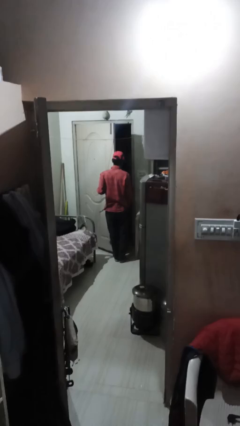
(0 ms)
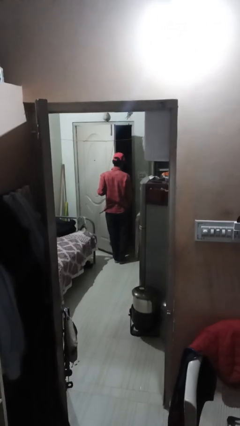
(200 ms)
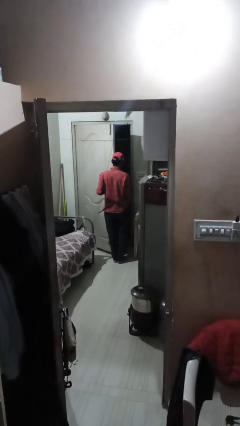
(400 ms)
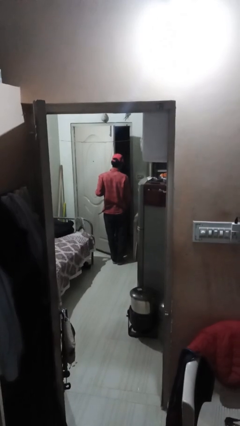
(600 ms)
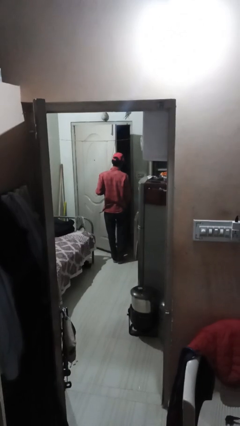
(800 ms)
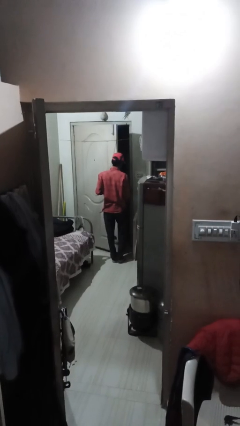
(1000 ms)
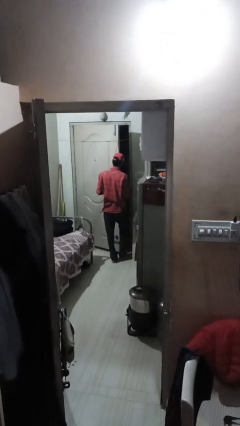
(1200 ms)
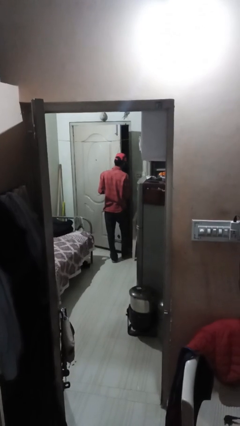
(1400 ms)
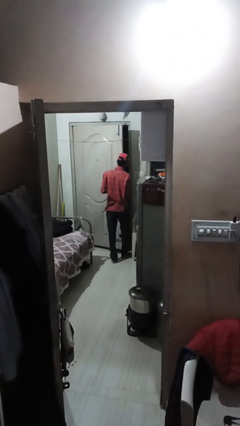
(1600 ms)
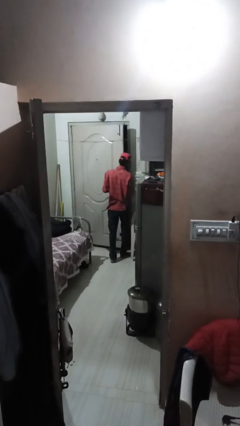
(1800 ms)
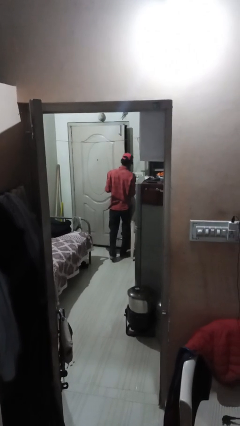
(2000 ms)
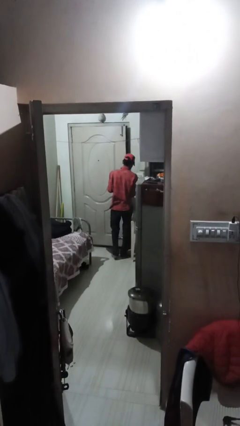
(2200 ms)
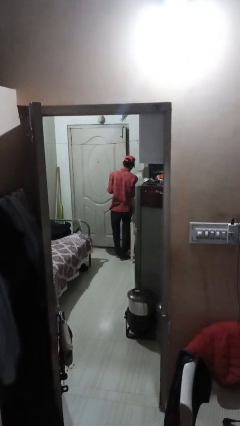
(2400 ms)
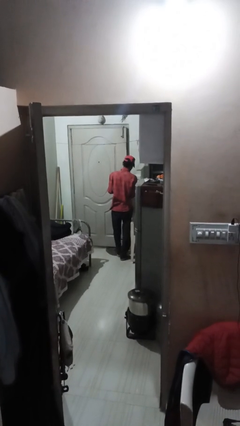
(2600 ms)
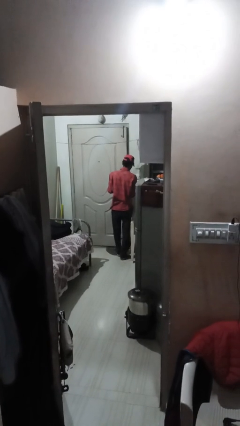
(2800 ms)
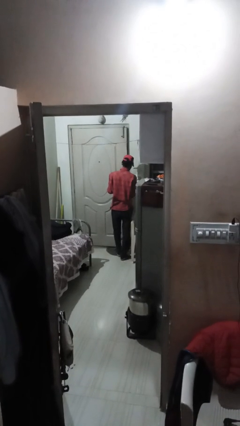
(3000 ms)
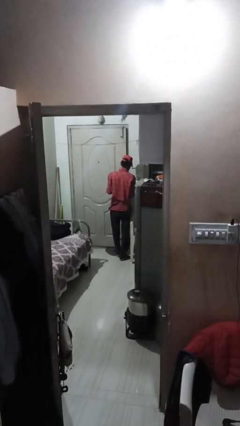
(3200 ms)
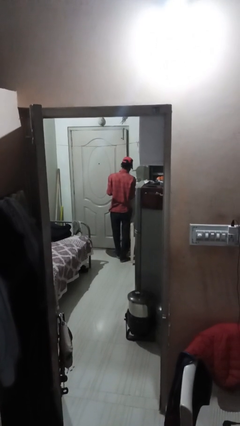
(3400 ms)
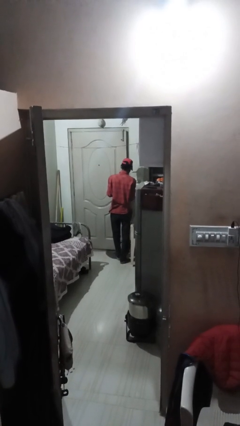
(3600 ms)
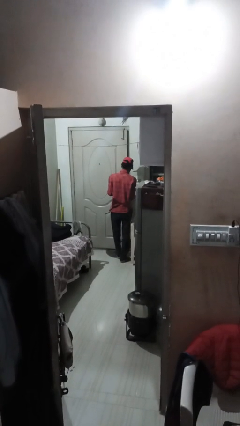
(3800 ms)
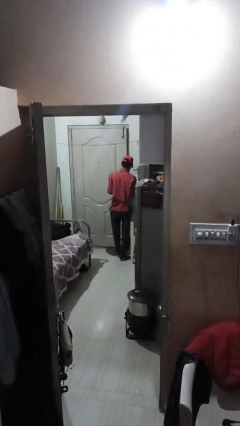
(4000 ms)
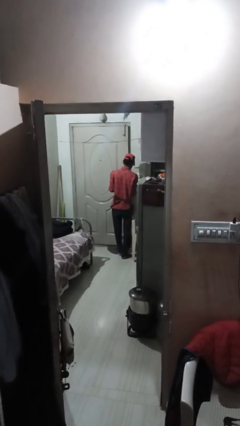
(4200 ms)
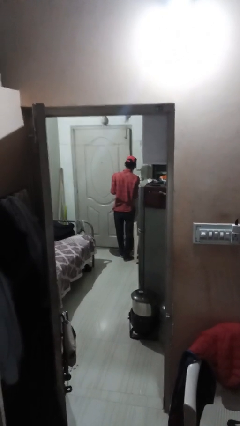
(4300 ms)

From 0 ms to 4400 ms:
person closes facility door

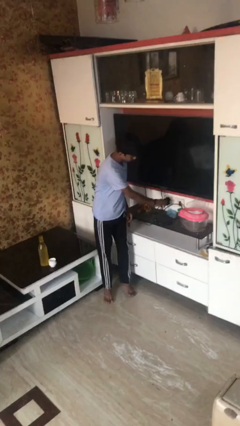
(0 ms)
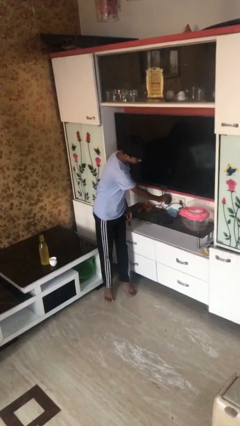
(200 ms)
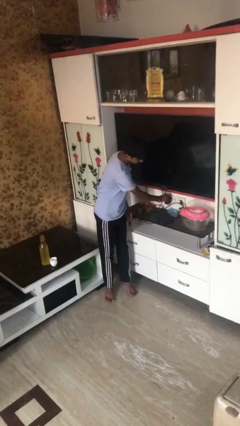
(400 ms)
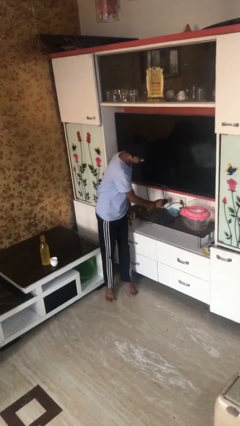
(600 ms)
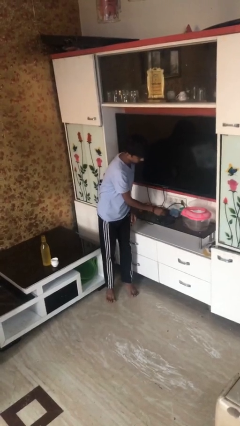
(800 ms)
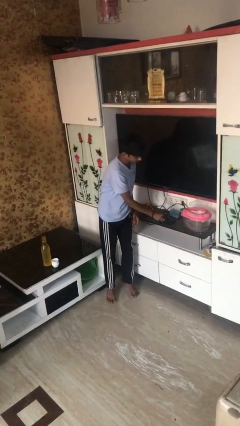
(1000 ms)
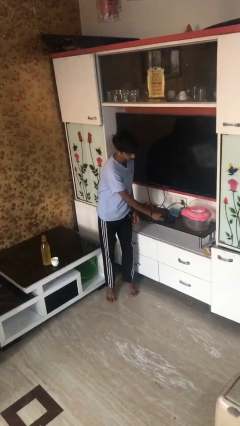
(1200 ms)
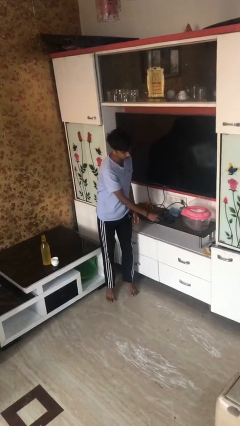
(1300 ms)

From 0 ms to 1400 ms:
person unplugs from electrical socket

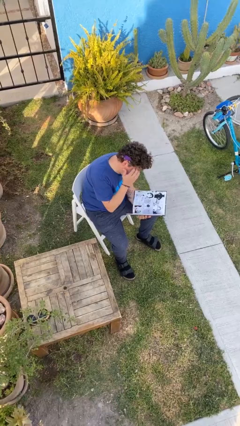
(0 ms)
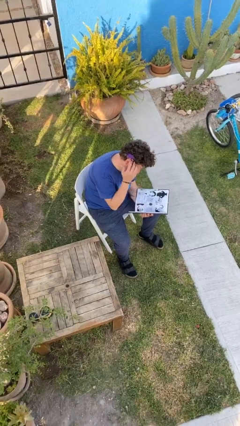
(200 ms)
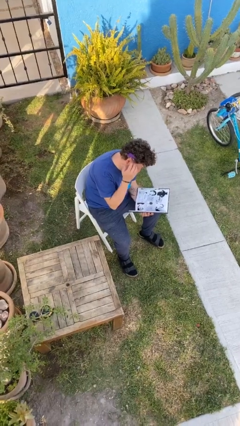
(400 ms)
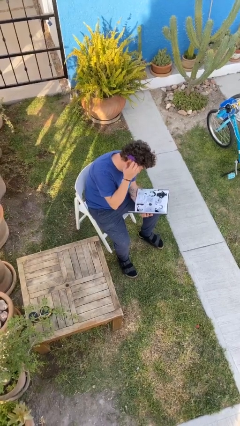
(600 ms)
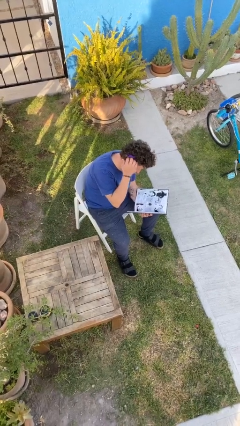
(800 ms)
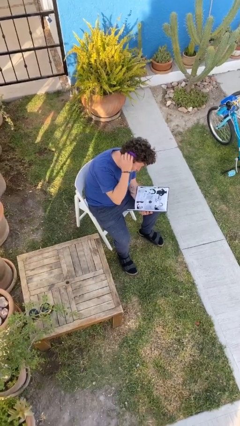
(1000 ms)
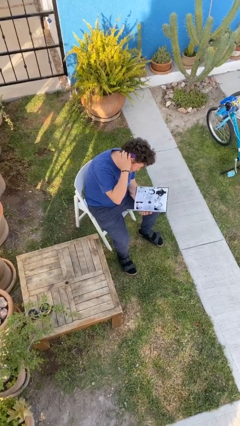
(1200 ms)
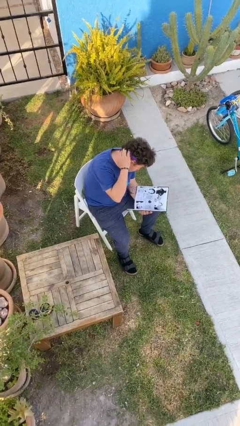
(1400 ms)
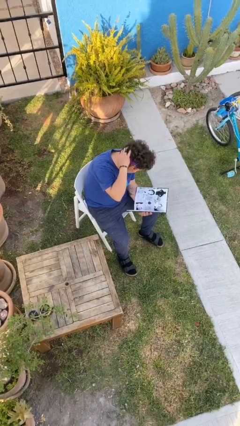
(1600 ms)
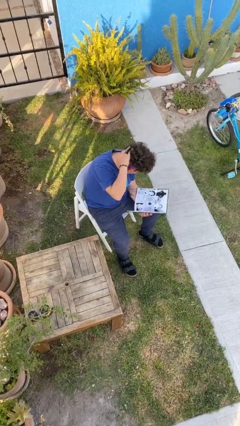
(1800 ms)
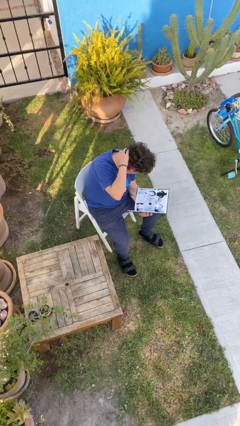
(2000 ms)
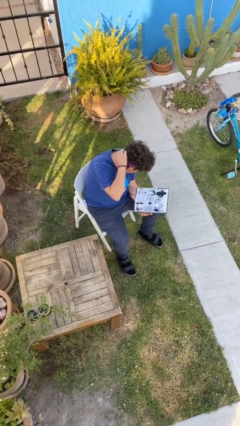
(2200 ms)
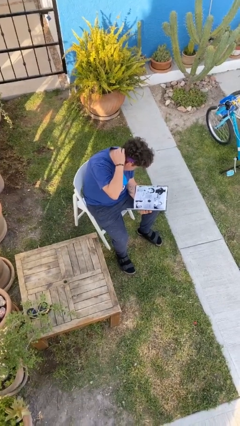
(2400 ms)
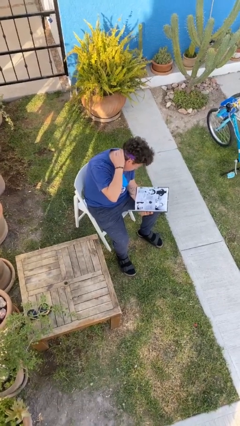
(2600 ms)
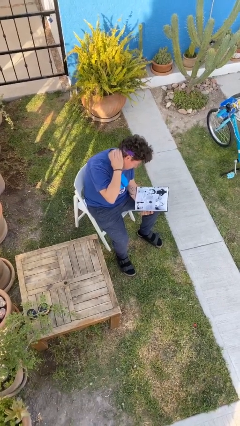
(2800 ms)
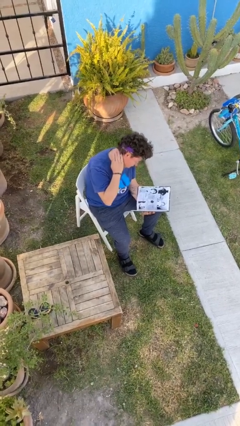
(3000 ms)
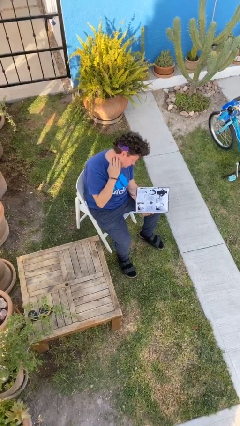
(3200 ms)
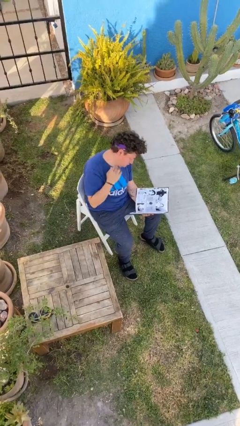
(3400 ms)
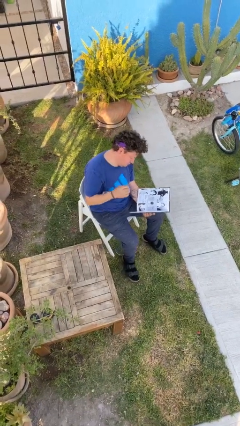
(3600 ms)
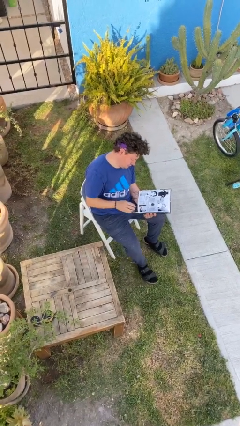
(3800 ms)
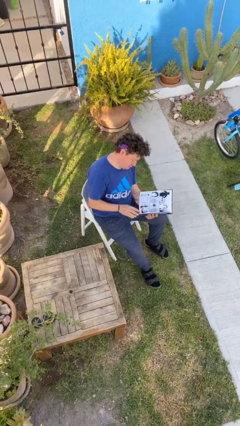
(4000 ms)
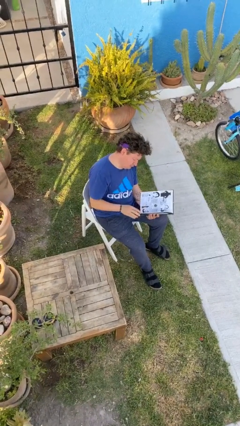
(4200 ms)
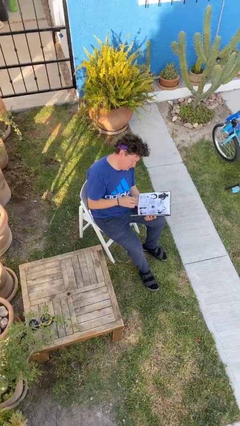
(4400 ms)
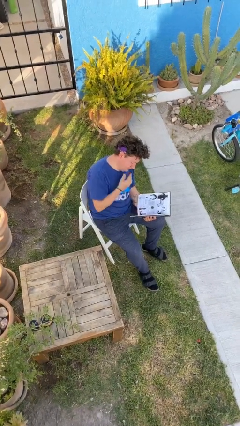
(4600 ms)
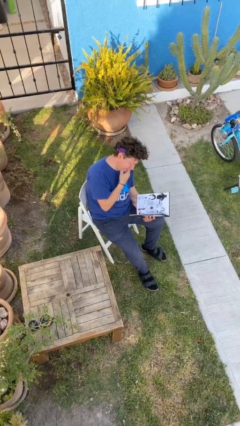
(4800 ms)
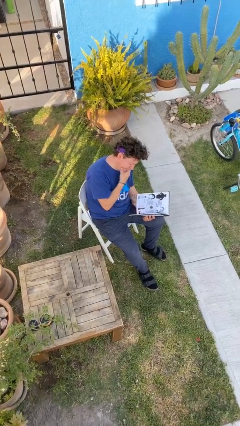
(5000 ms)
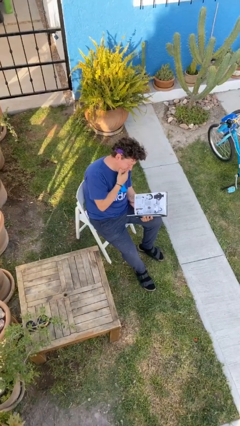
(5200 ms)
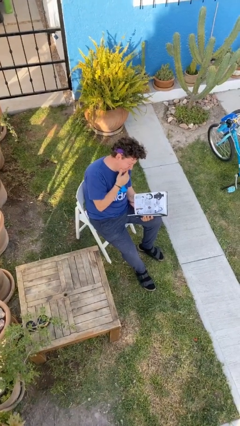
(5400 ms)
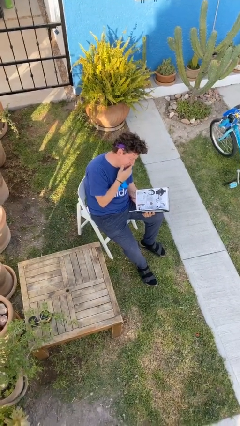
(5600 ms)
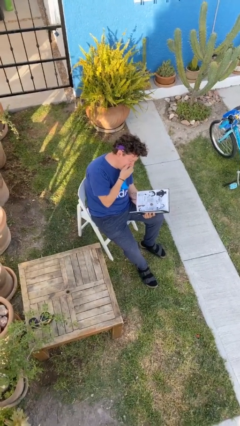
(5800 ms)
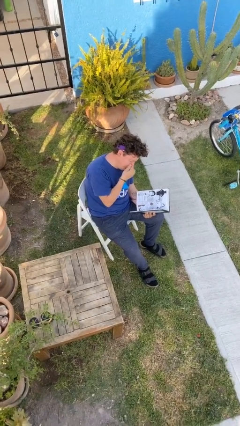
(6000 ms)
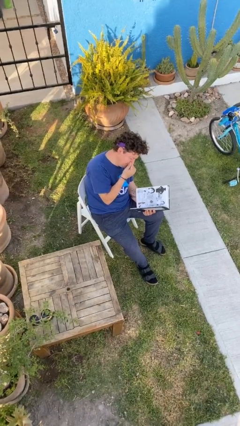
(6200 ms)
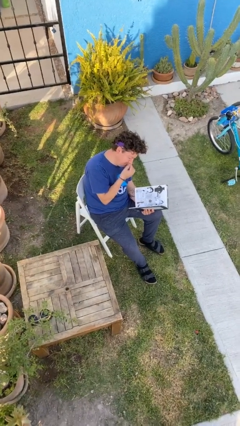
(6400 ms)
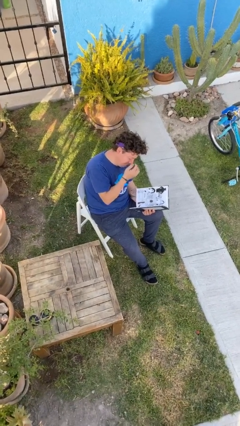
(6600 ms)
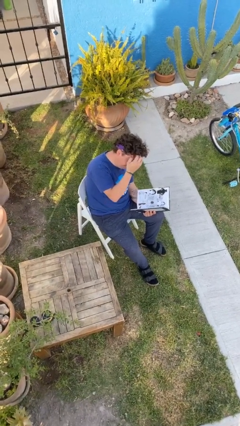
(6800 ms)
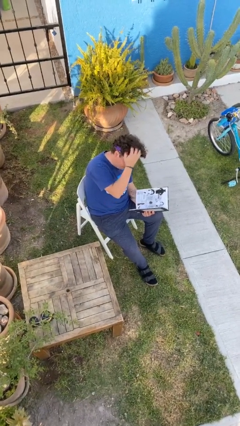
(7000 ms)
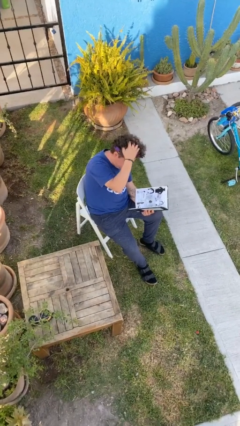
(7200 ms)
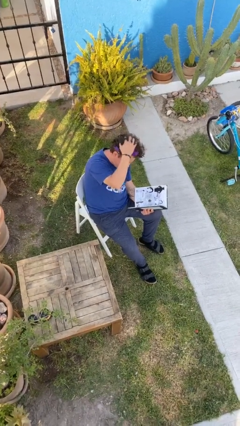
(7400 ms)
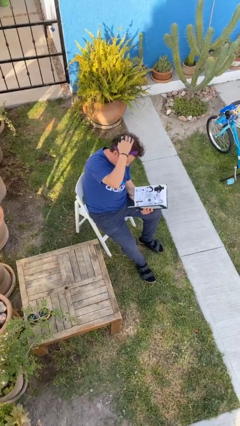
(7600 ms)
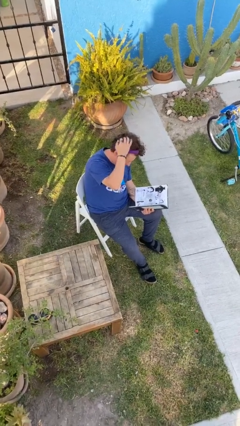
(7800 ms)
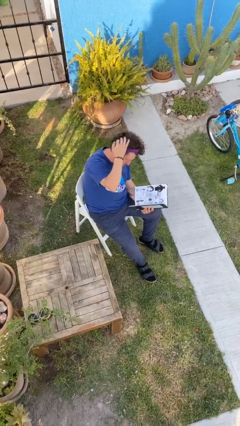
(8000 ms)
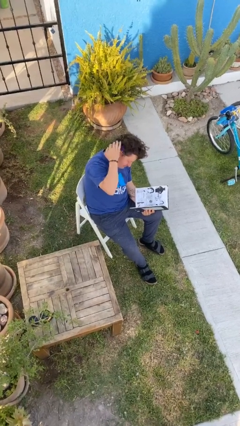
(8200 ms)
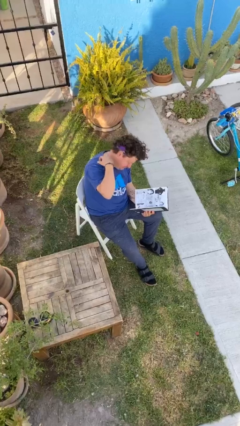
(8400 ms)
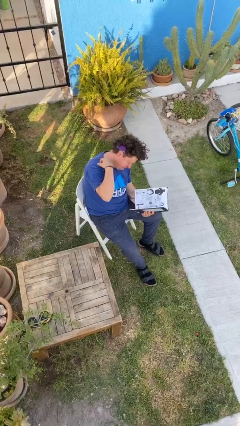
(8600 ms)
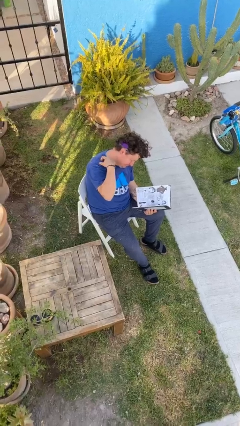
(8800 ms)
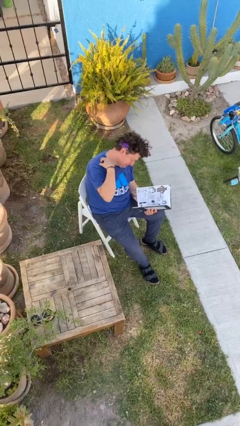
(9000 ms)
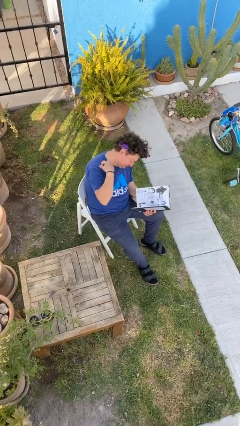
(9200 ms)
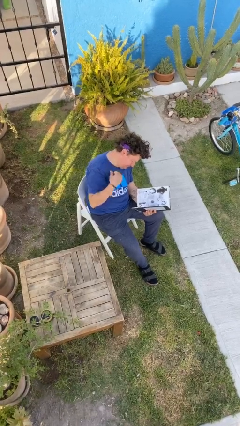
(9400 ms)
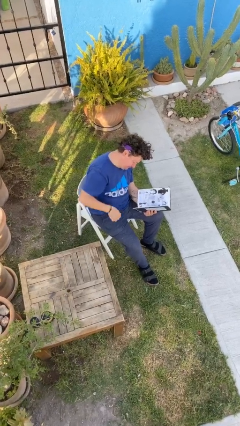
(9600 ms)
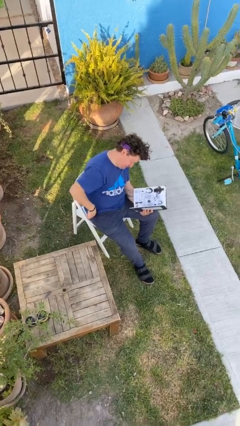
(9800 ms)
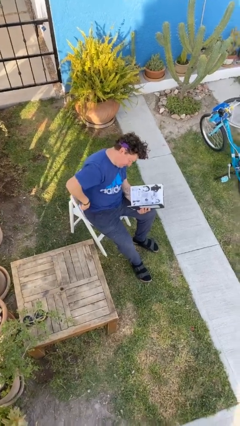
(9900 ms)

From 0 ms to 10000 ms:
person reads document

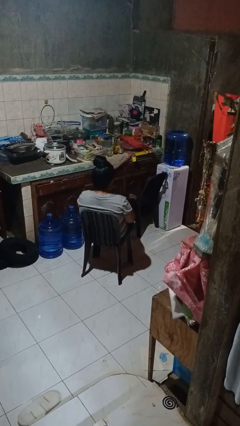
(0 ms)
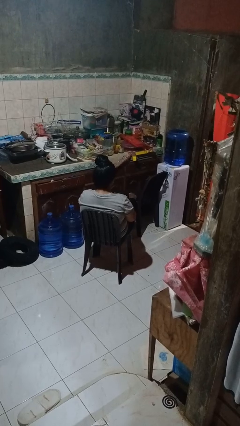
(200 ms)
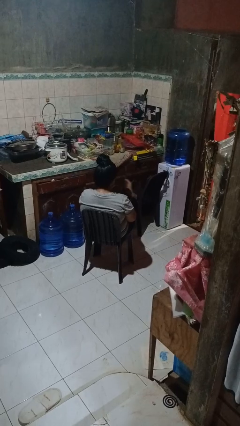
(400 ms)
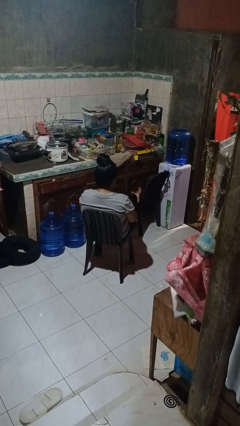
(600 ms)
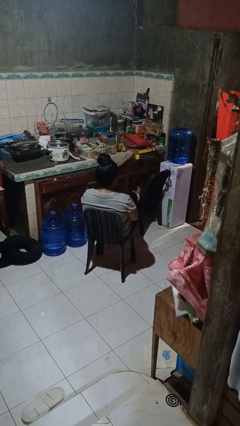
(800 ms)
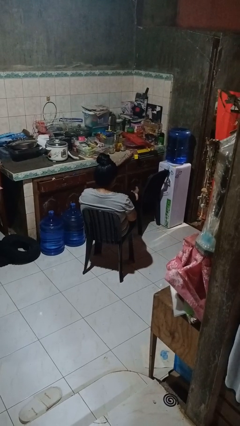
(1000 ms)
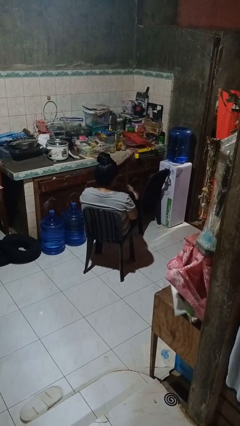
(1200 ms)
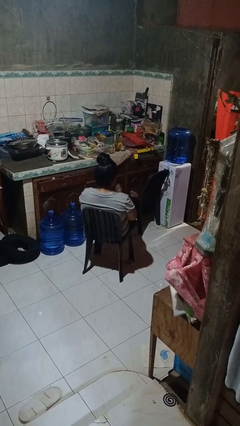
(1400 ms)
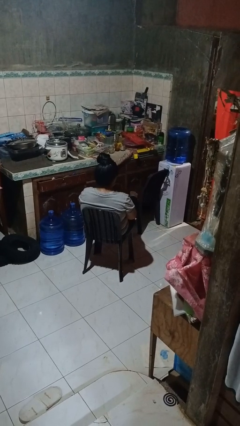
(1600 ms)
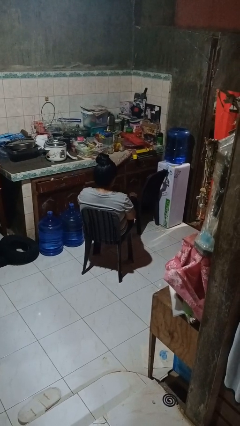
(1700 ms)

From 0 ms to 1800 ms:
person puts feet up

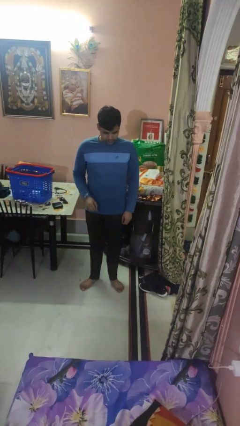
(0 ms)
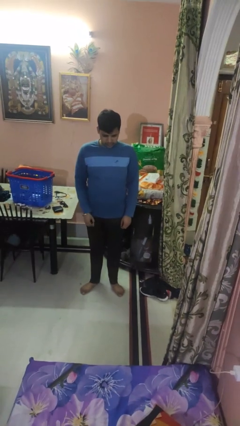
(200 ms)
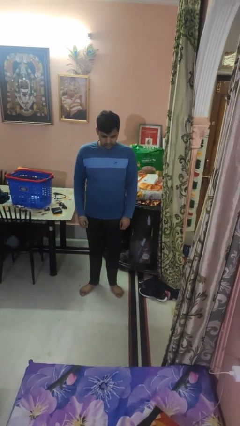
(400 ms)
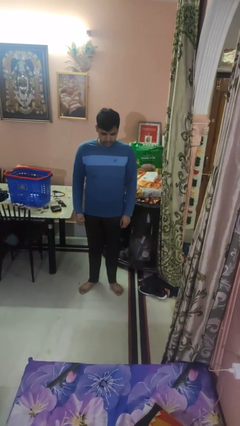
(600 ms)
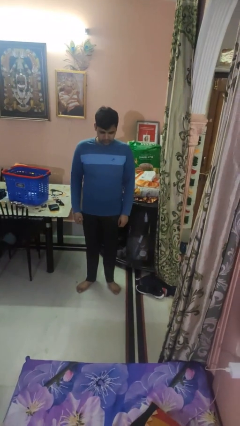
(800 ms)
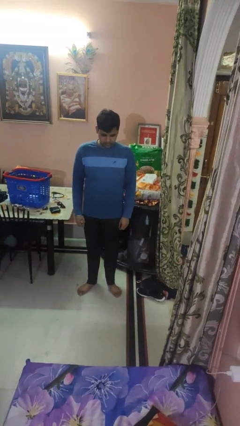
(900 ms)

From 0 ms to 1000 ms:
person takes off earrings
